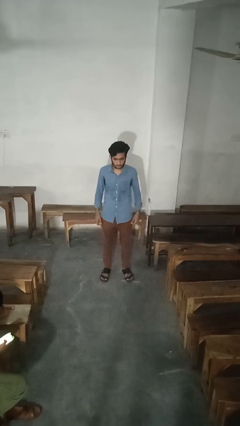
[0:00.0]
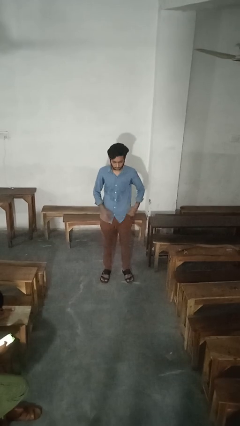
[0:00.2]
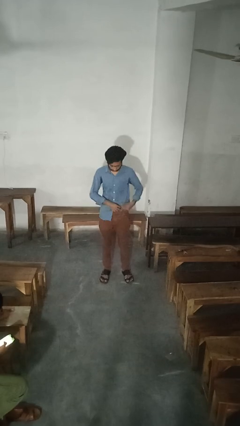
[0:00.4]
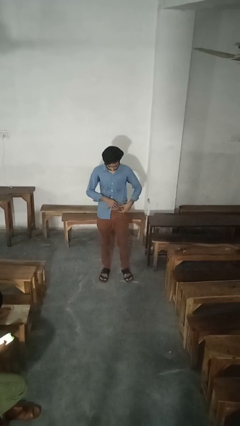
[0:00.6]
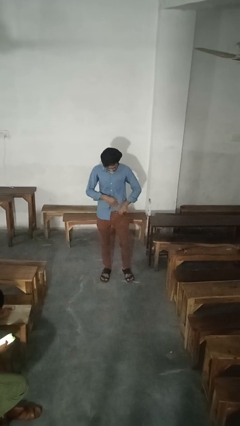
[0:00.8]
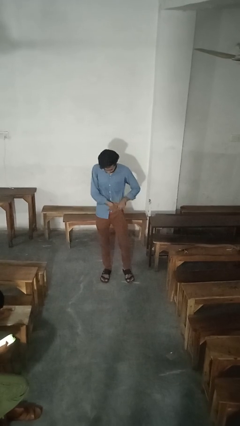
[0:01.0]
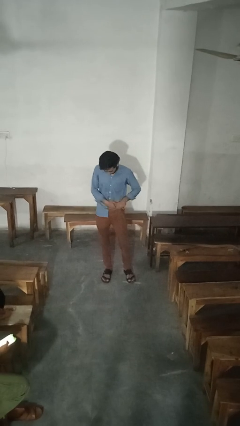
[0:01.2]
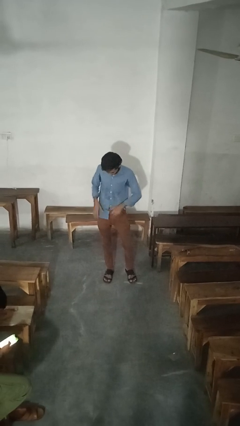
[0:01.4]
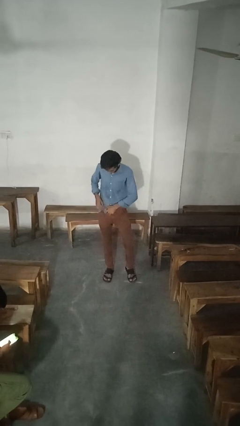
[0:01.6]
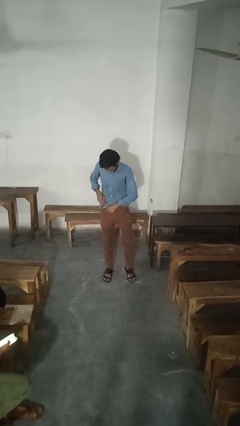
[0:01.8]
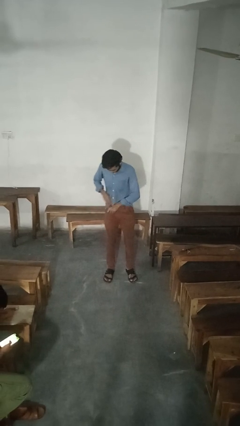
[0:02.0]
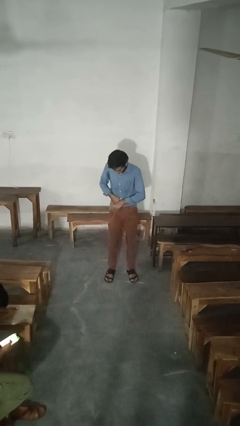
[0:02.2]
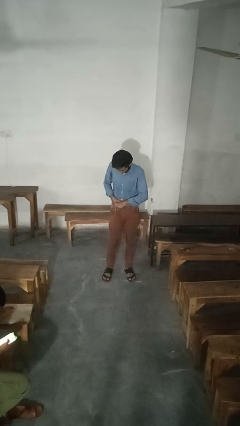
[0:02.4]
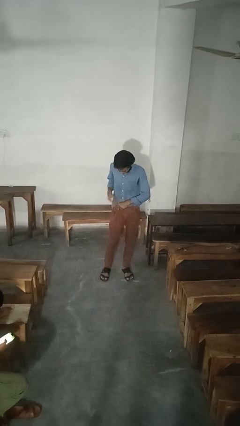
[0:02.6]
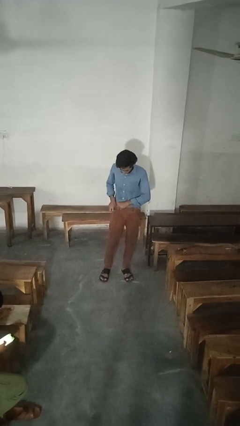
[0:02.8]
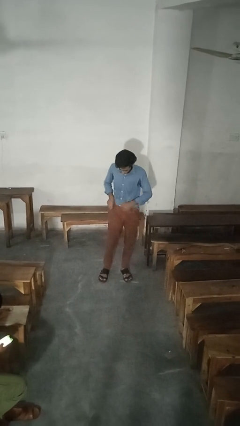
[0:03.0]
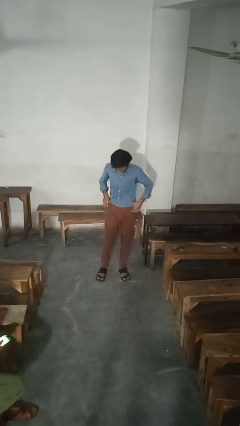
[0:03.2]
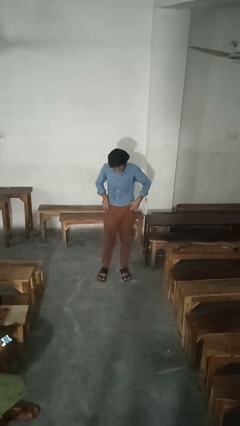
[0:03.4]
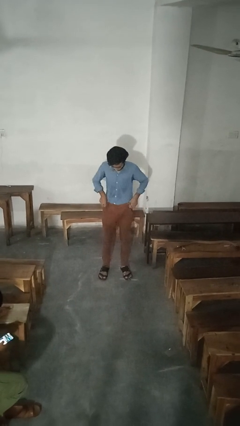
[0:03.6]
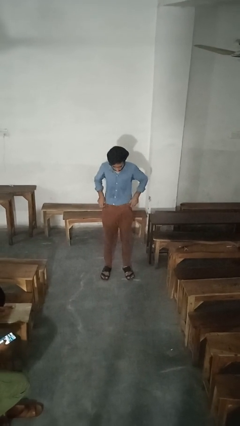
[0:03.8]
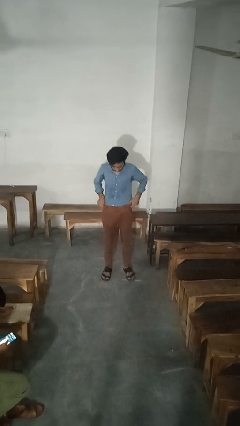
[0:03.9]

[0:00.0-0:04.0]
person tucks in shirt

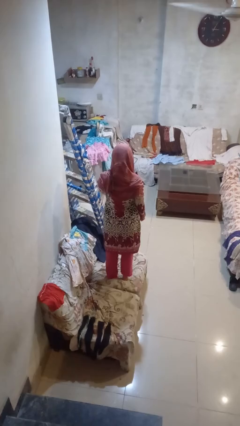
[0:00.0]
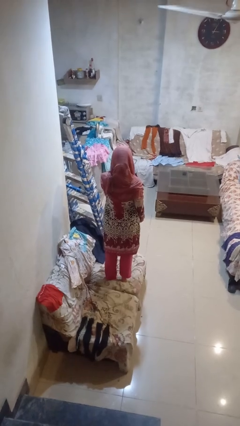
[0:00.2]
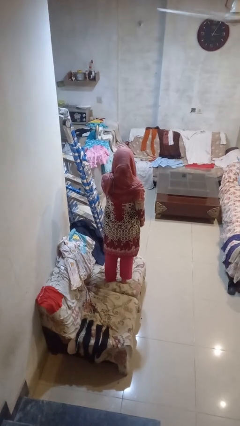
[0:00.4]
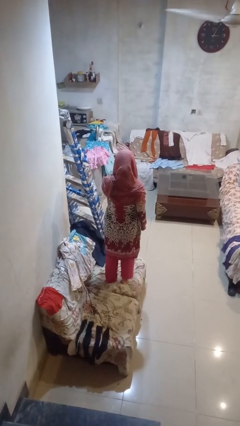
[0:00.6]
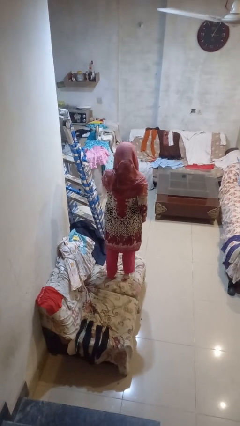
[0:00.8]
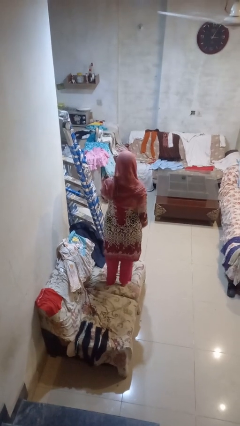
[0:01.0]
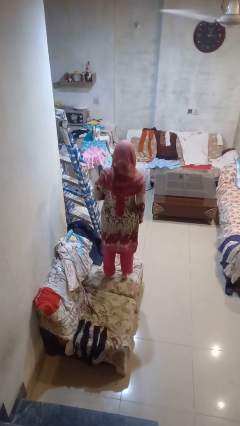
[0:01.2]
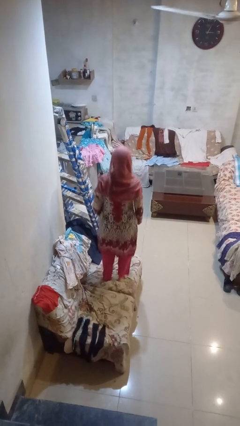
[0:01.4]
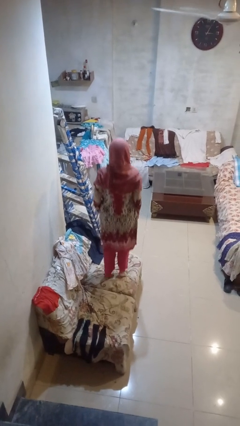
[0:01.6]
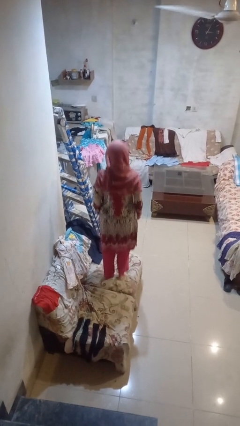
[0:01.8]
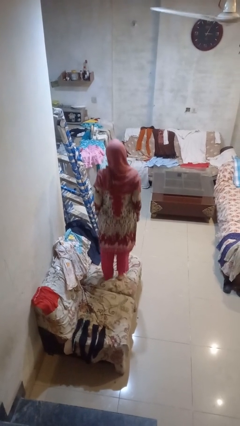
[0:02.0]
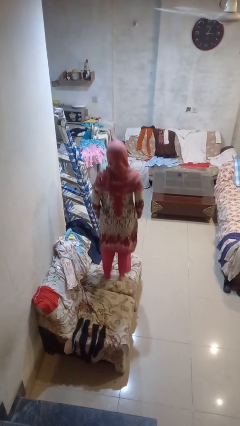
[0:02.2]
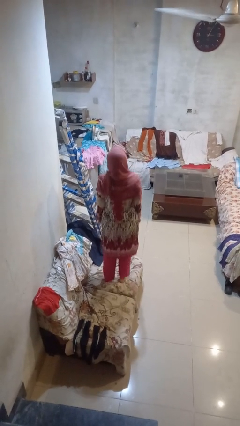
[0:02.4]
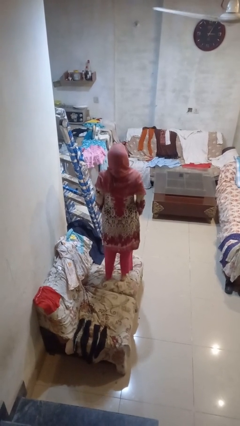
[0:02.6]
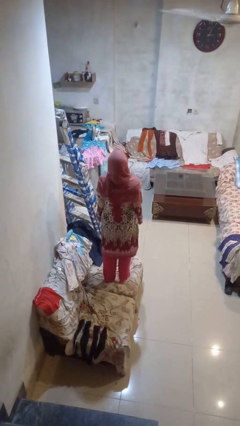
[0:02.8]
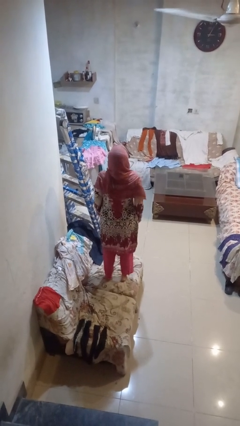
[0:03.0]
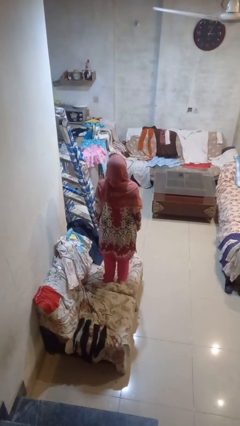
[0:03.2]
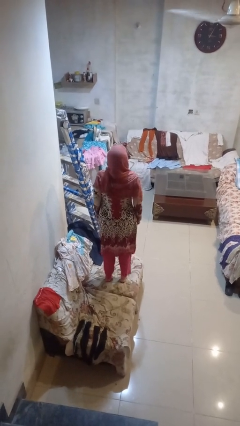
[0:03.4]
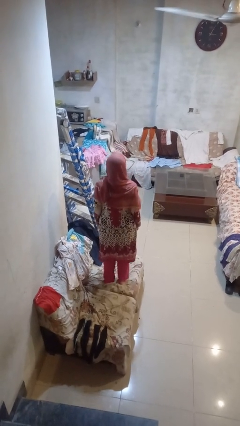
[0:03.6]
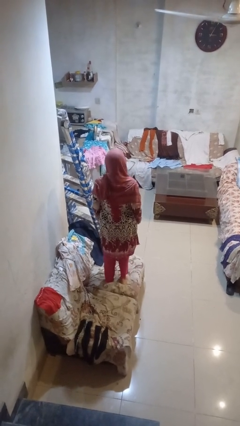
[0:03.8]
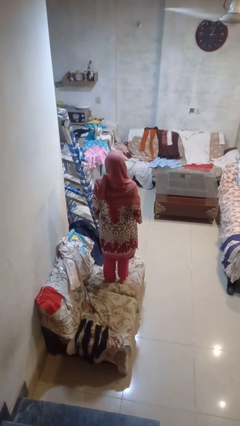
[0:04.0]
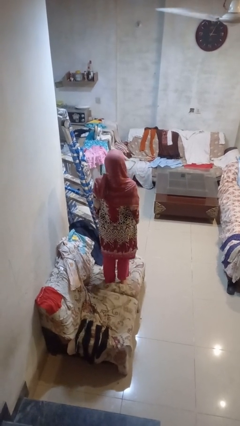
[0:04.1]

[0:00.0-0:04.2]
person jumps on couch

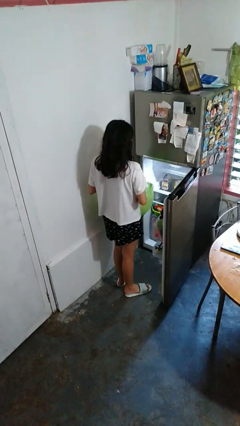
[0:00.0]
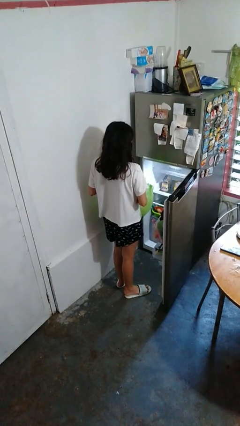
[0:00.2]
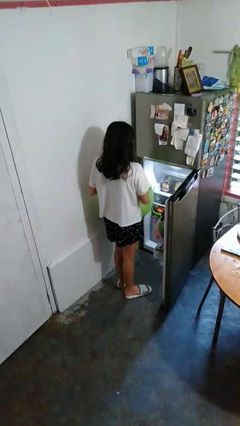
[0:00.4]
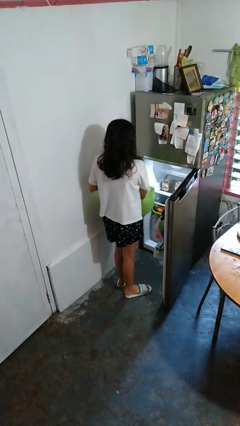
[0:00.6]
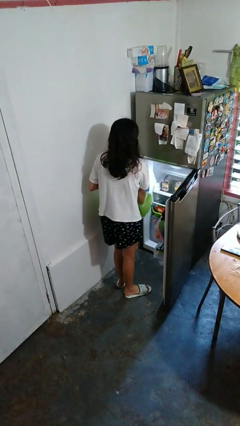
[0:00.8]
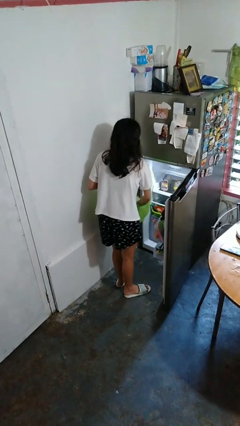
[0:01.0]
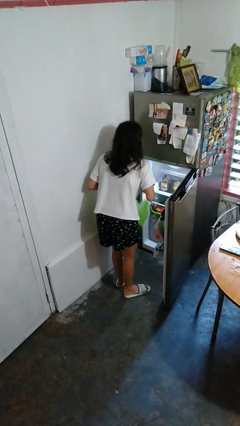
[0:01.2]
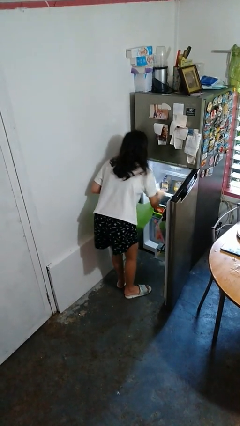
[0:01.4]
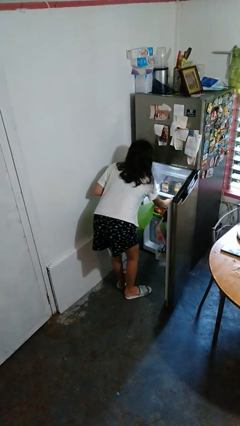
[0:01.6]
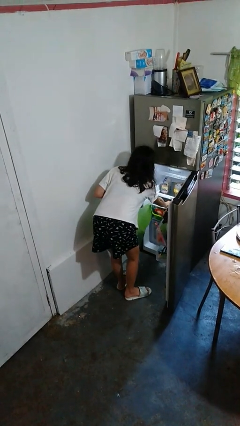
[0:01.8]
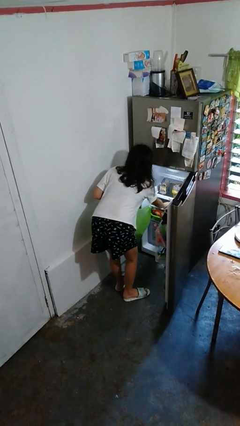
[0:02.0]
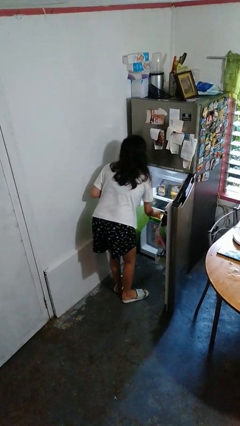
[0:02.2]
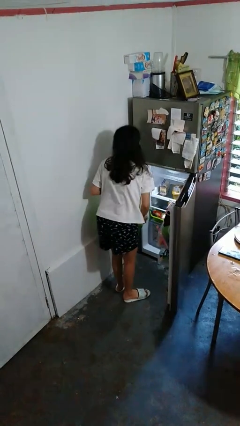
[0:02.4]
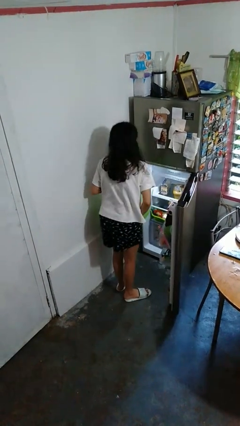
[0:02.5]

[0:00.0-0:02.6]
person loads groceries into refrigerator

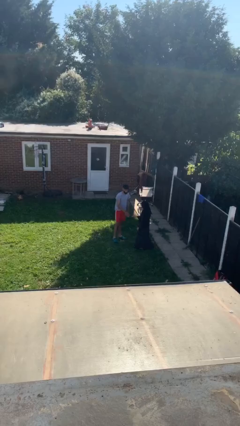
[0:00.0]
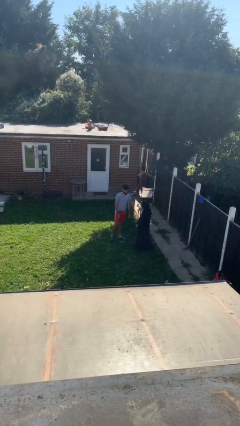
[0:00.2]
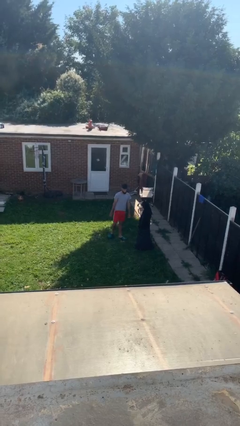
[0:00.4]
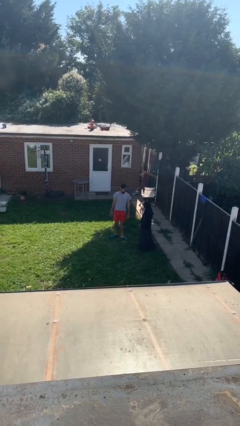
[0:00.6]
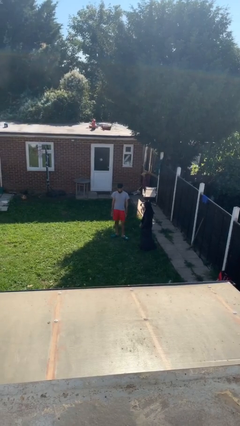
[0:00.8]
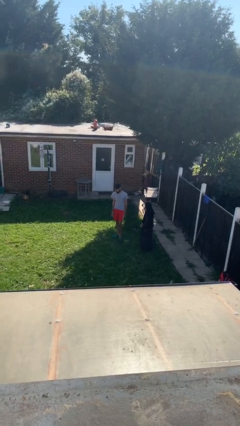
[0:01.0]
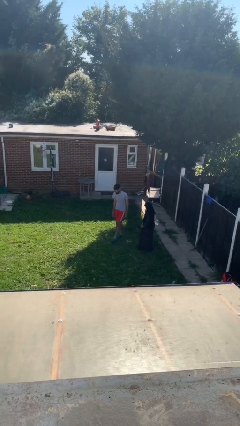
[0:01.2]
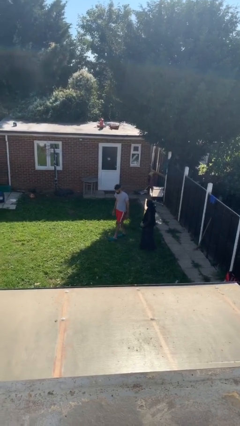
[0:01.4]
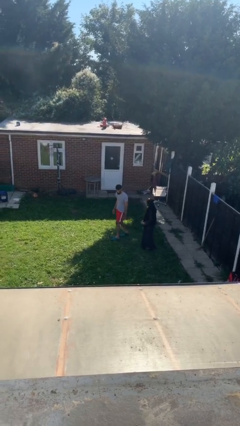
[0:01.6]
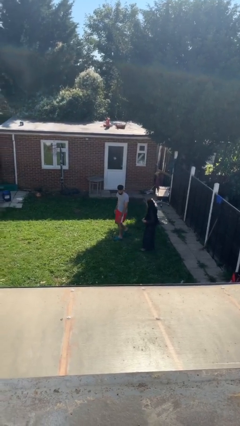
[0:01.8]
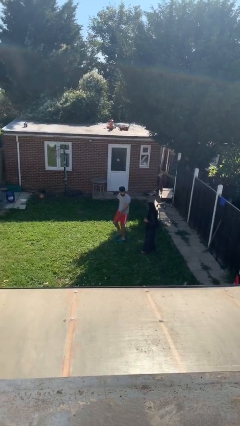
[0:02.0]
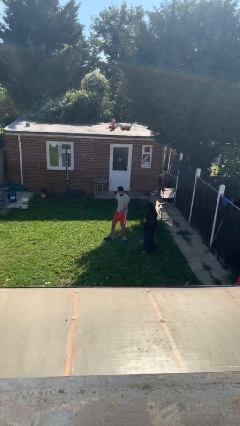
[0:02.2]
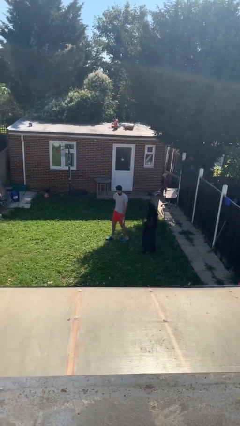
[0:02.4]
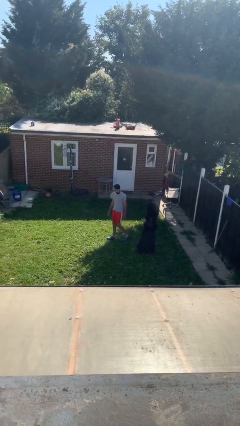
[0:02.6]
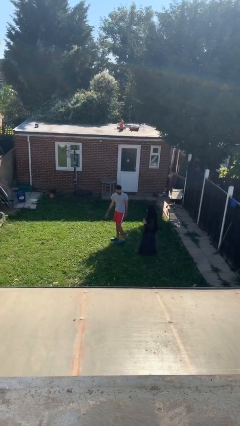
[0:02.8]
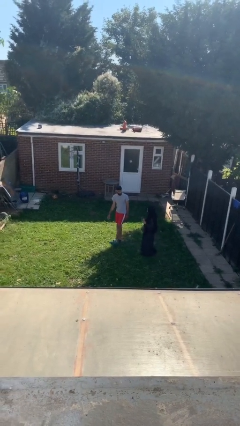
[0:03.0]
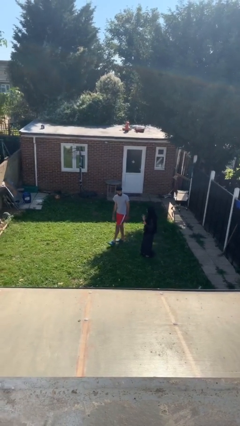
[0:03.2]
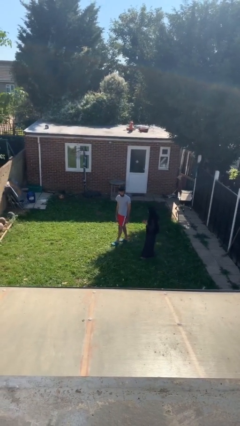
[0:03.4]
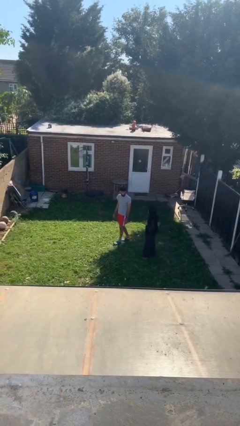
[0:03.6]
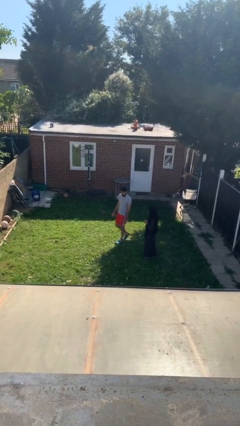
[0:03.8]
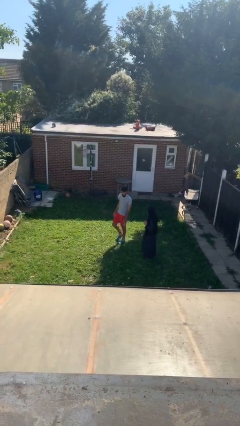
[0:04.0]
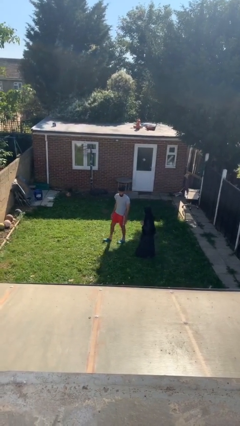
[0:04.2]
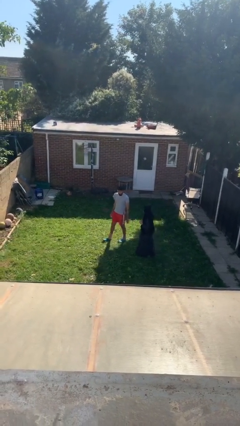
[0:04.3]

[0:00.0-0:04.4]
person talks to person

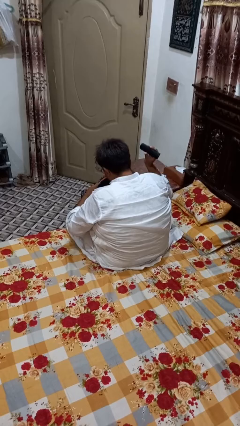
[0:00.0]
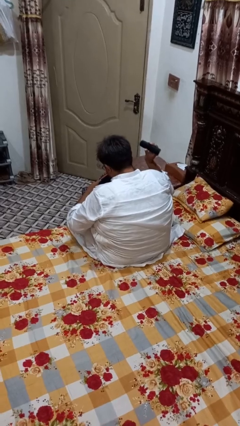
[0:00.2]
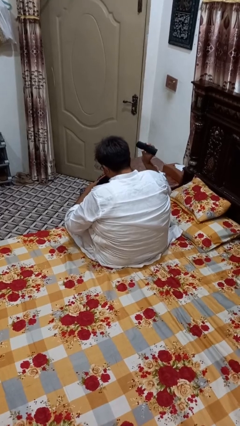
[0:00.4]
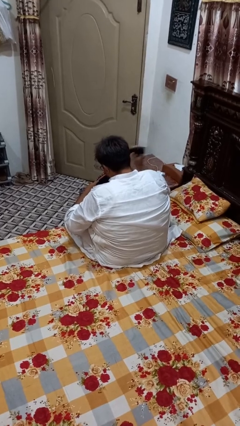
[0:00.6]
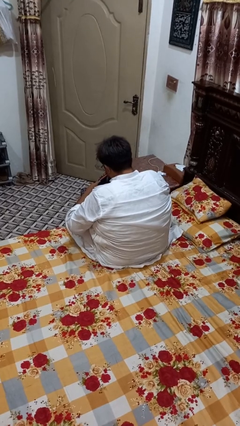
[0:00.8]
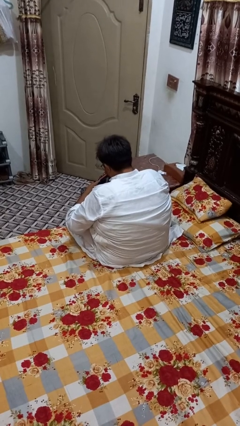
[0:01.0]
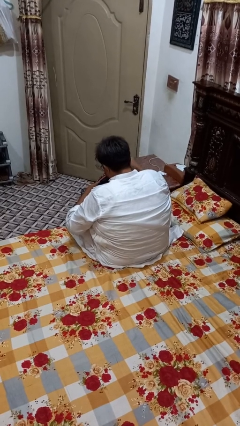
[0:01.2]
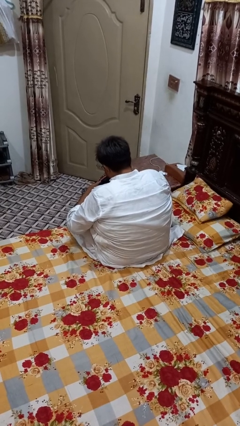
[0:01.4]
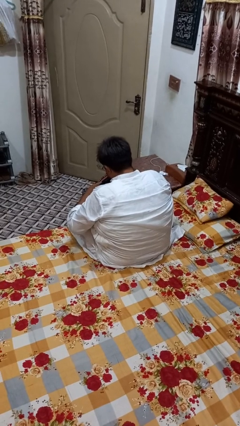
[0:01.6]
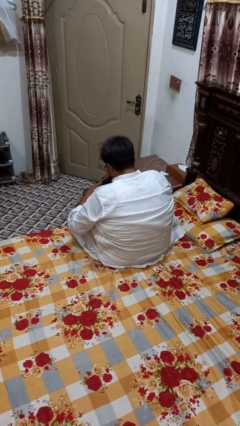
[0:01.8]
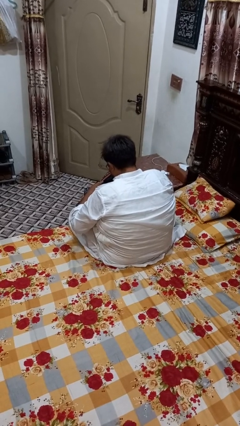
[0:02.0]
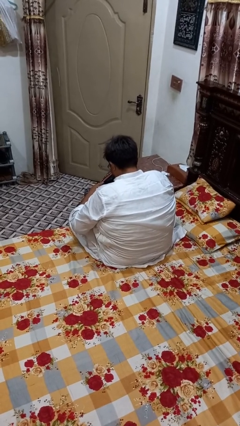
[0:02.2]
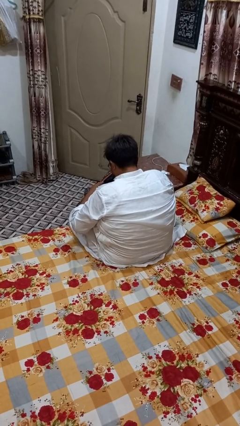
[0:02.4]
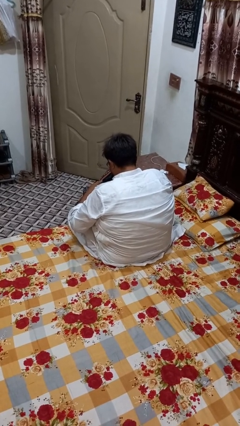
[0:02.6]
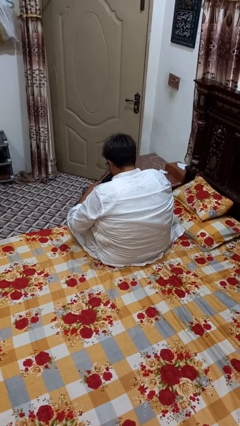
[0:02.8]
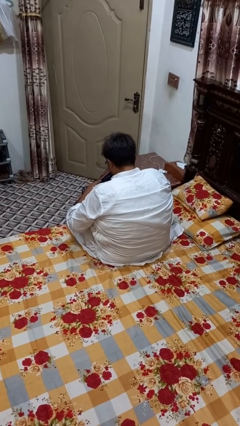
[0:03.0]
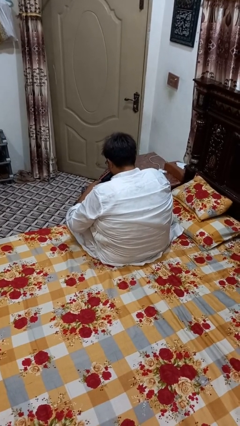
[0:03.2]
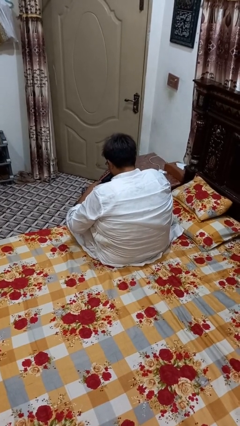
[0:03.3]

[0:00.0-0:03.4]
person puts object into bag
